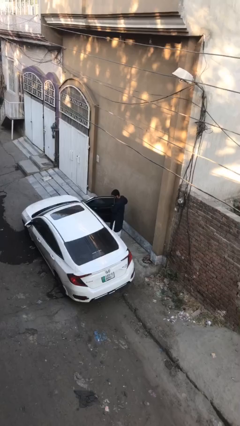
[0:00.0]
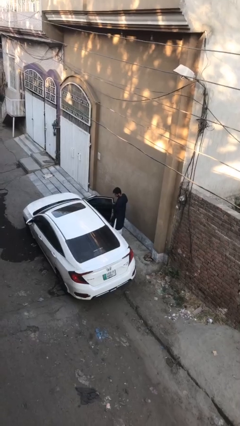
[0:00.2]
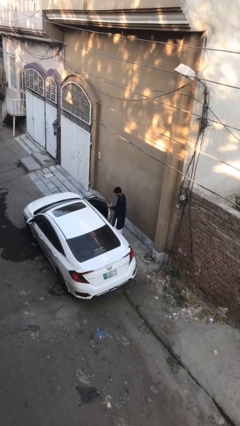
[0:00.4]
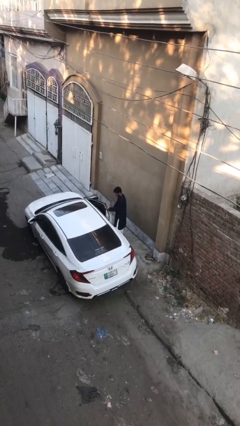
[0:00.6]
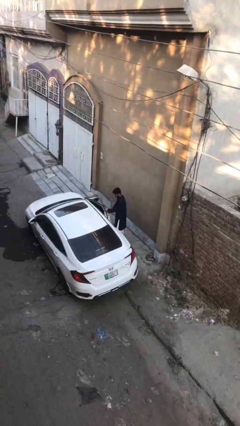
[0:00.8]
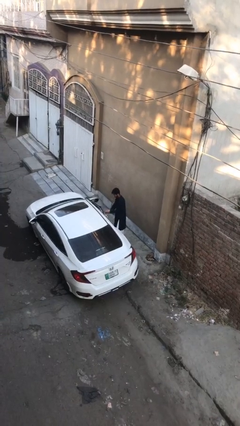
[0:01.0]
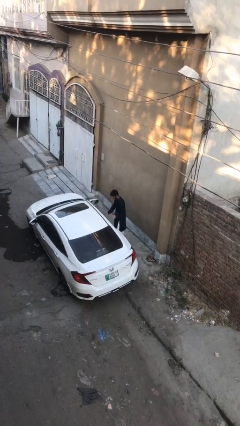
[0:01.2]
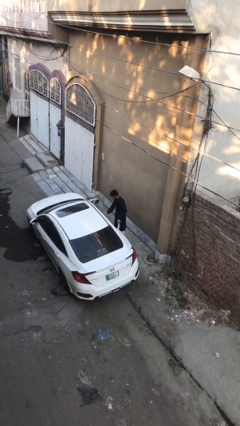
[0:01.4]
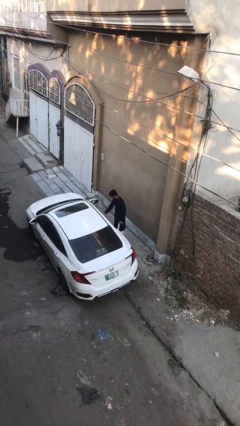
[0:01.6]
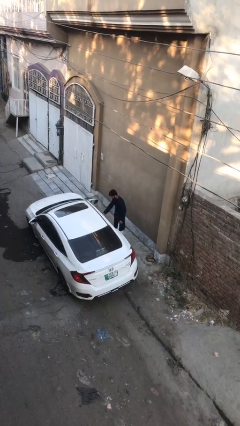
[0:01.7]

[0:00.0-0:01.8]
person closes car door

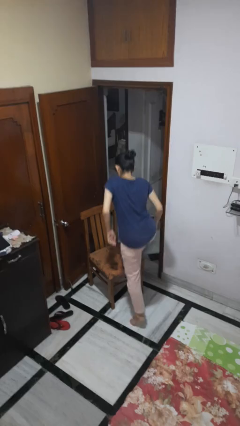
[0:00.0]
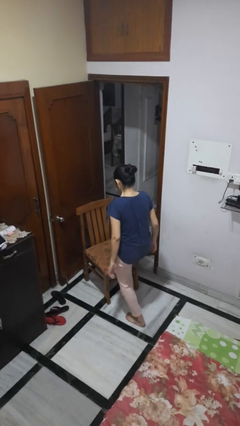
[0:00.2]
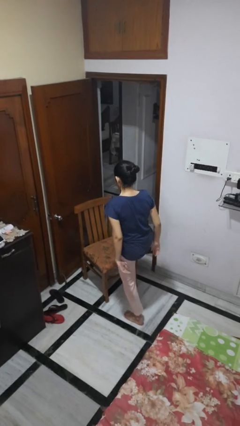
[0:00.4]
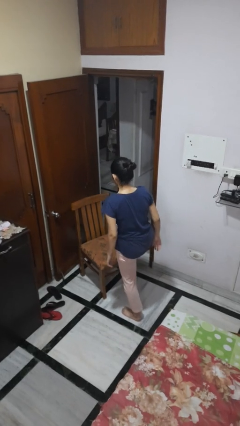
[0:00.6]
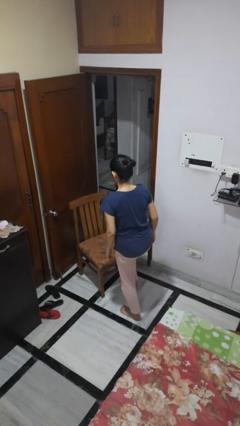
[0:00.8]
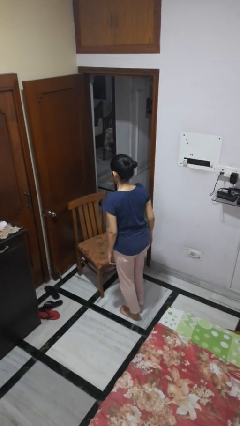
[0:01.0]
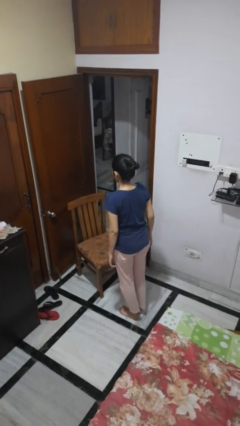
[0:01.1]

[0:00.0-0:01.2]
person climbs off chair

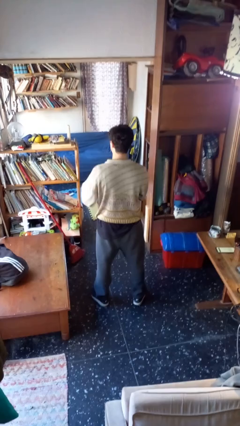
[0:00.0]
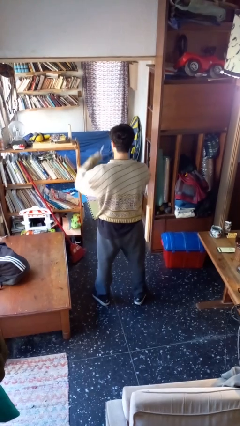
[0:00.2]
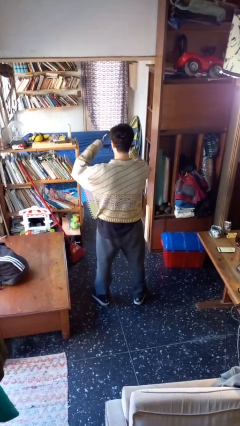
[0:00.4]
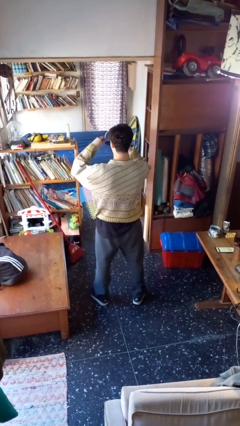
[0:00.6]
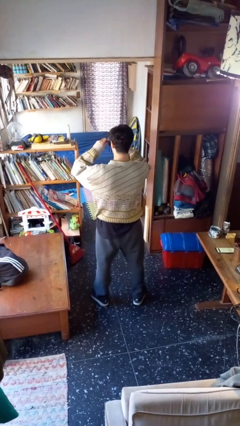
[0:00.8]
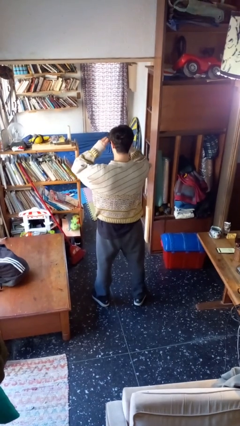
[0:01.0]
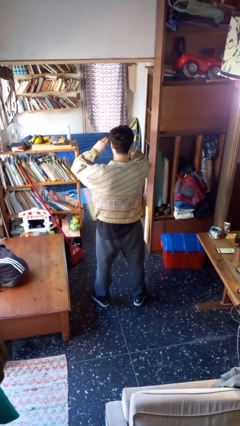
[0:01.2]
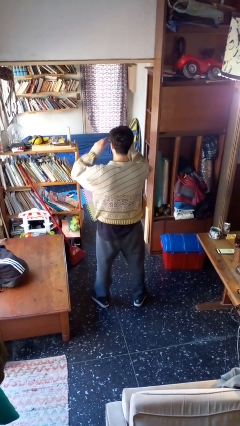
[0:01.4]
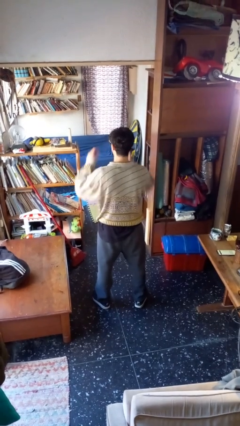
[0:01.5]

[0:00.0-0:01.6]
person puts on sunglasses

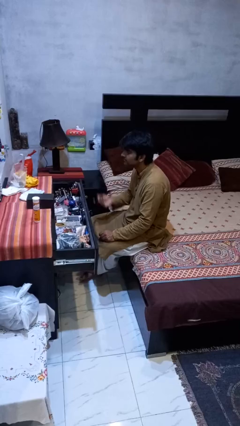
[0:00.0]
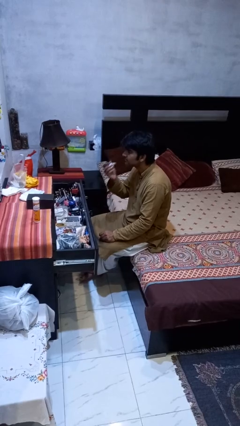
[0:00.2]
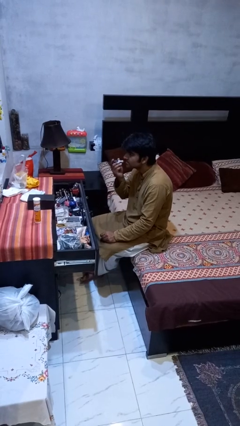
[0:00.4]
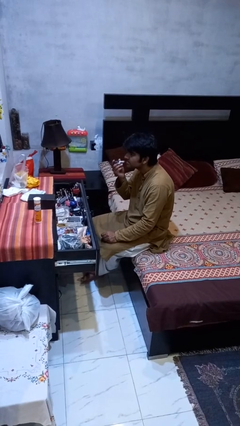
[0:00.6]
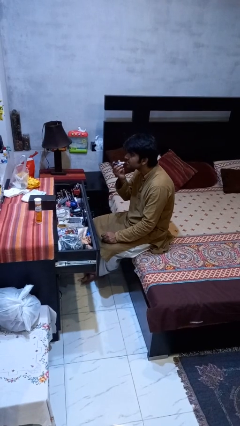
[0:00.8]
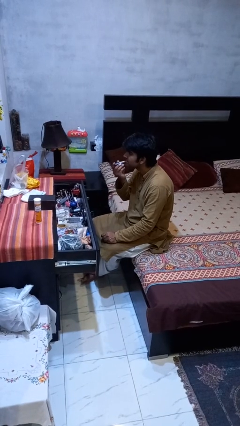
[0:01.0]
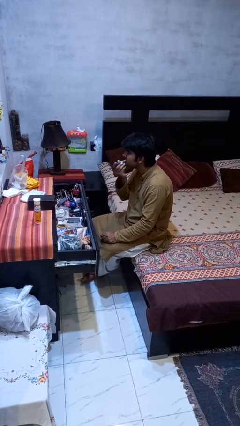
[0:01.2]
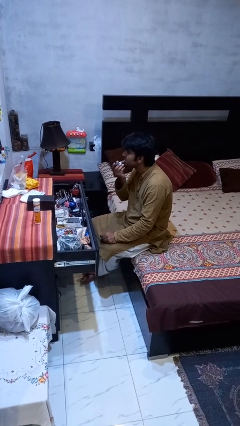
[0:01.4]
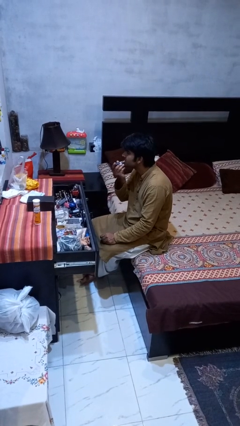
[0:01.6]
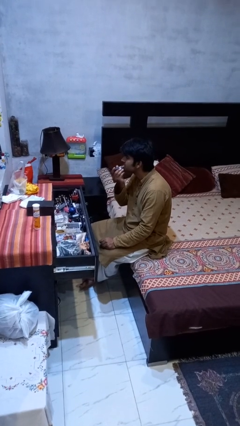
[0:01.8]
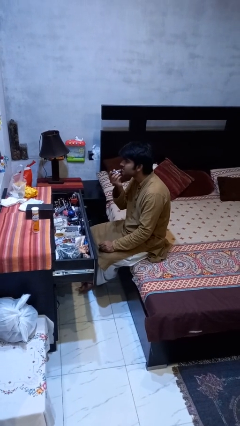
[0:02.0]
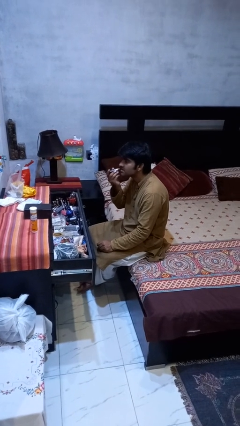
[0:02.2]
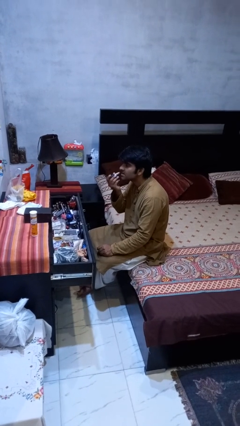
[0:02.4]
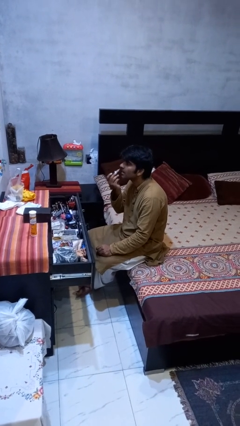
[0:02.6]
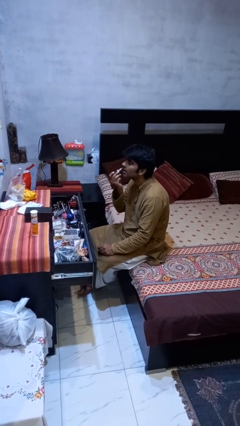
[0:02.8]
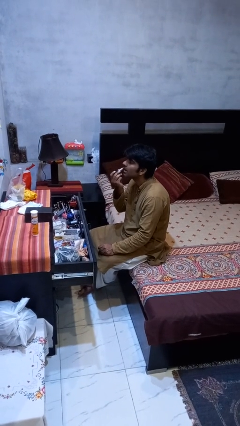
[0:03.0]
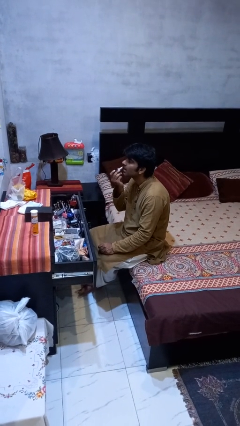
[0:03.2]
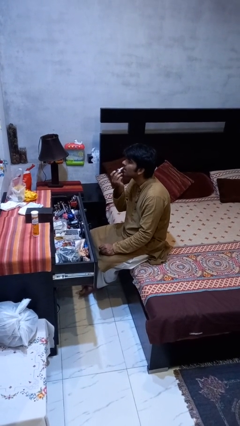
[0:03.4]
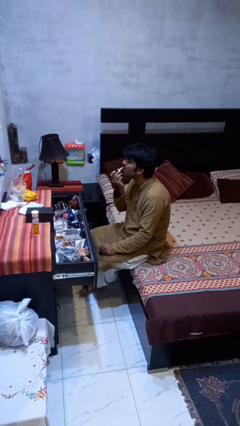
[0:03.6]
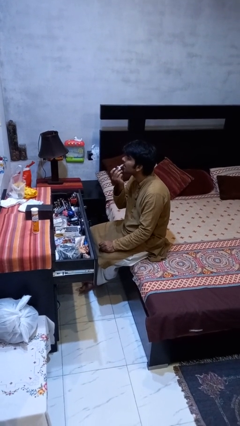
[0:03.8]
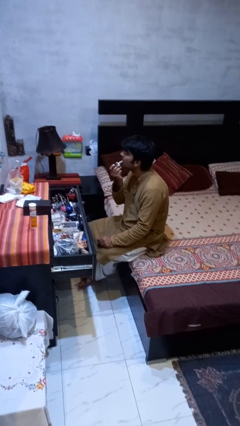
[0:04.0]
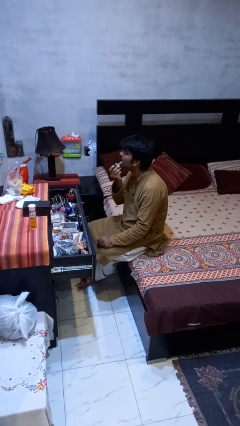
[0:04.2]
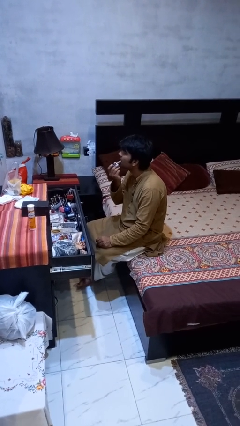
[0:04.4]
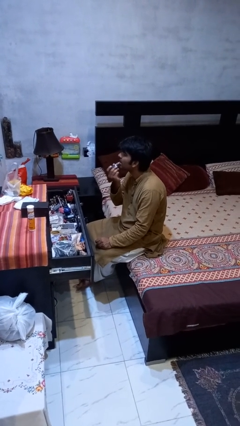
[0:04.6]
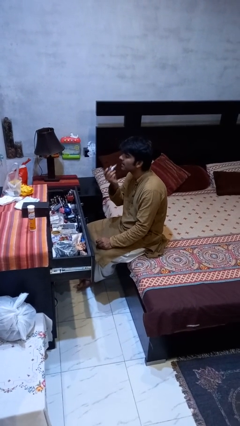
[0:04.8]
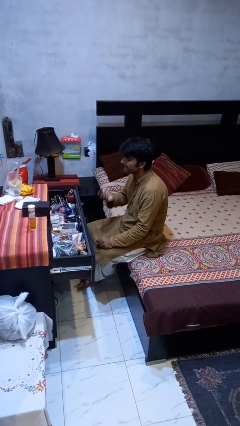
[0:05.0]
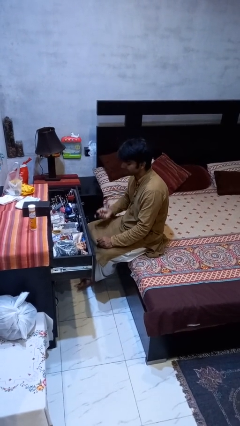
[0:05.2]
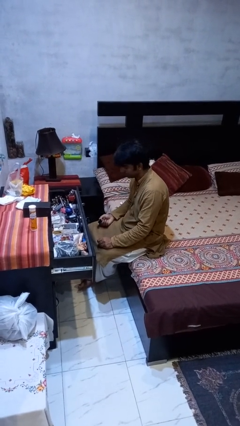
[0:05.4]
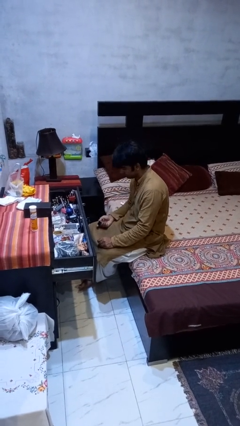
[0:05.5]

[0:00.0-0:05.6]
person applies lip makeup

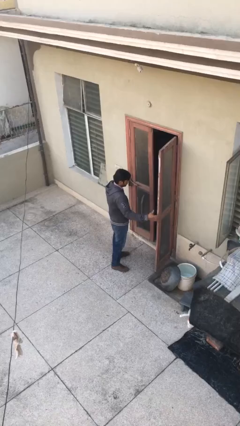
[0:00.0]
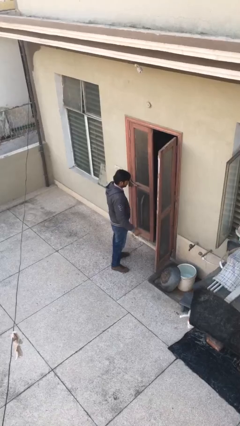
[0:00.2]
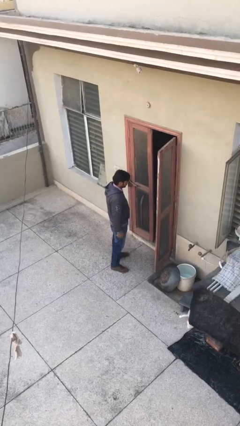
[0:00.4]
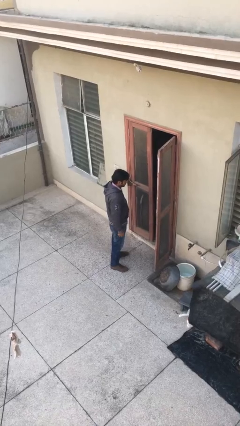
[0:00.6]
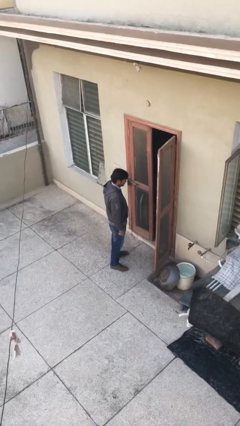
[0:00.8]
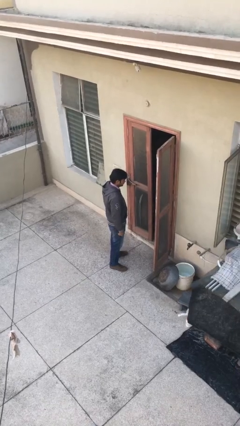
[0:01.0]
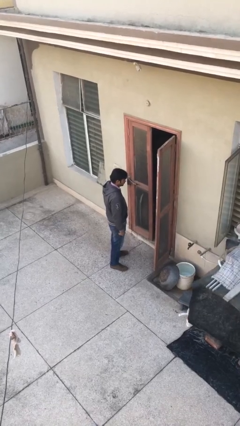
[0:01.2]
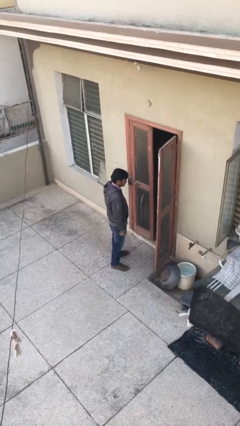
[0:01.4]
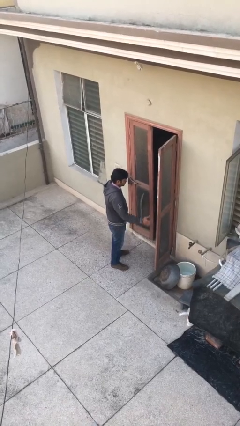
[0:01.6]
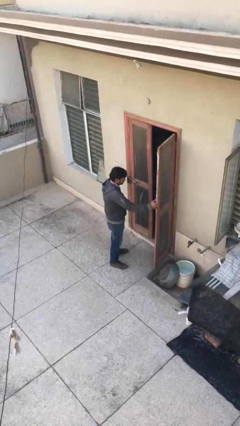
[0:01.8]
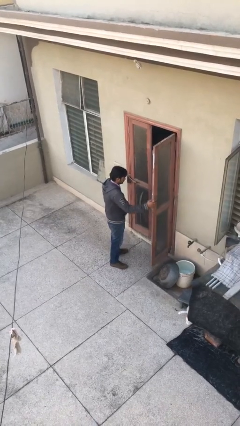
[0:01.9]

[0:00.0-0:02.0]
person opens facility door

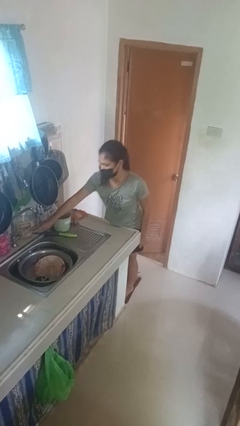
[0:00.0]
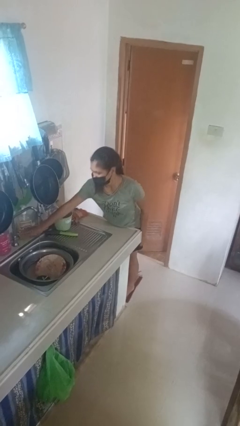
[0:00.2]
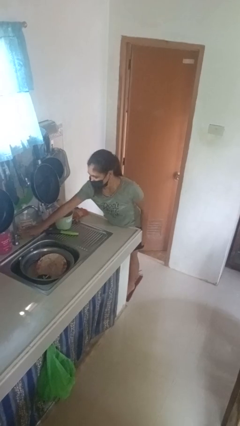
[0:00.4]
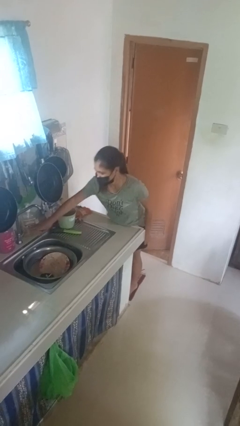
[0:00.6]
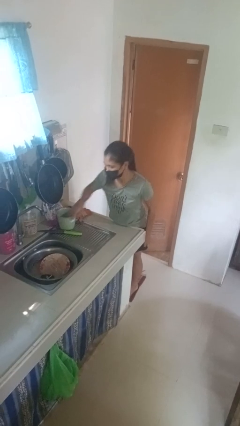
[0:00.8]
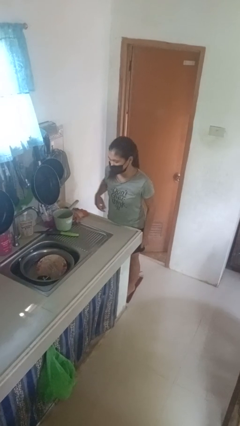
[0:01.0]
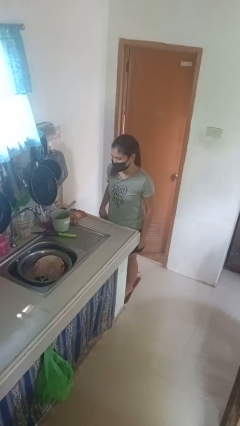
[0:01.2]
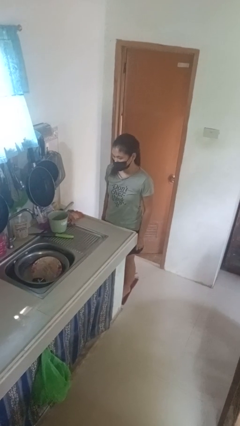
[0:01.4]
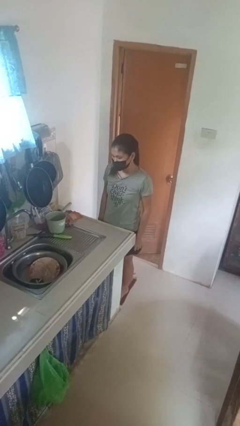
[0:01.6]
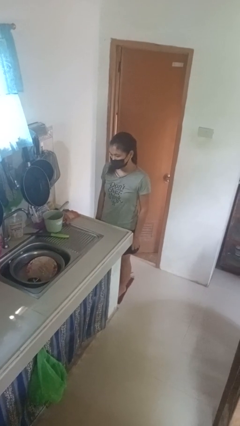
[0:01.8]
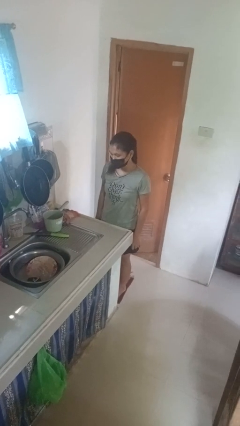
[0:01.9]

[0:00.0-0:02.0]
person turns off faucet

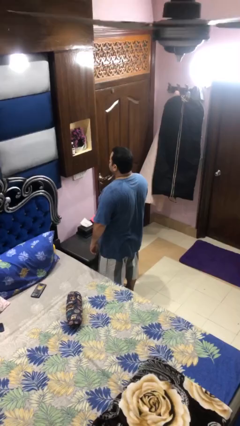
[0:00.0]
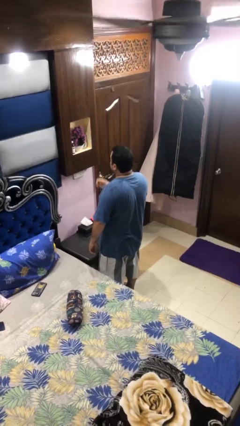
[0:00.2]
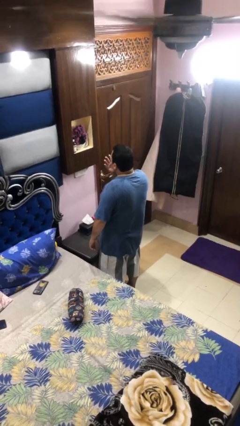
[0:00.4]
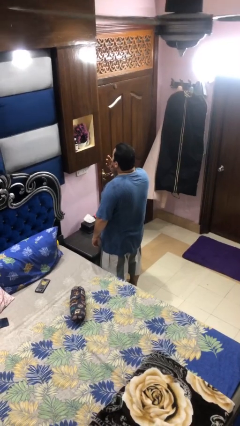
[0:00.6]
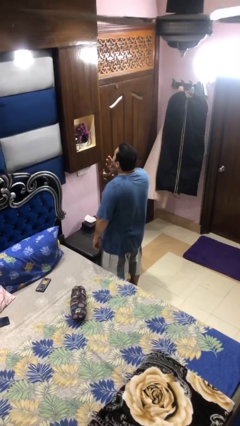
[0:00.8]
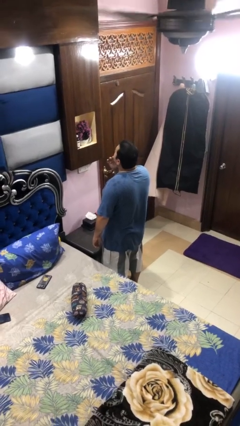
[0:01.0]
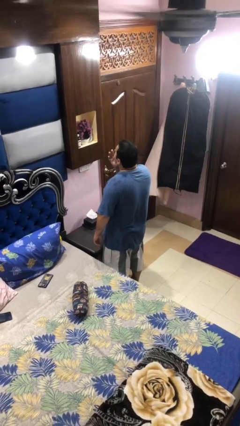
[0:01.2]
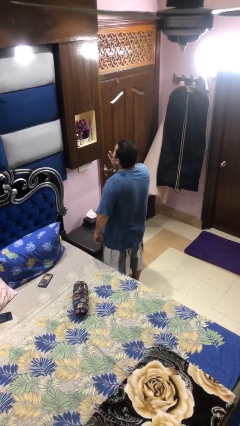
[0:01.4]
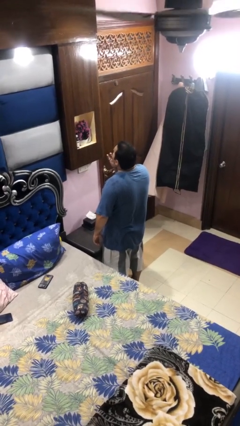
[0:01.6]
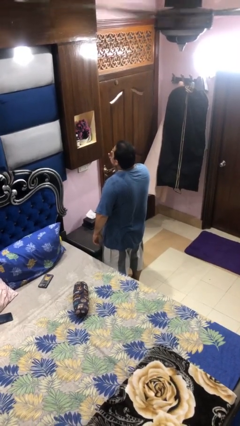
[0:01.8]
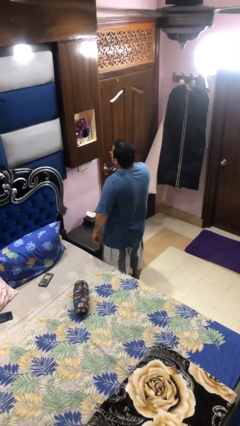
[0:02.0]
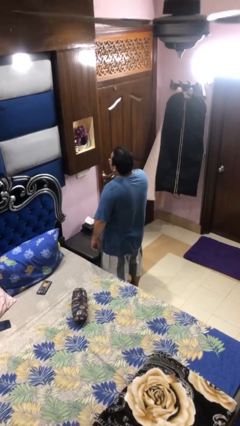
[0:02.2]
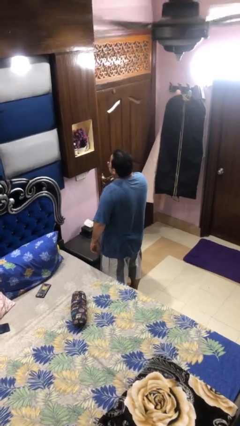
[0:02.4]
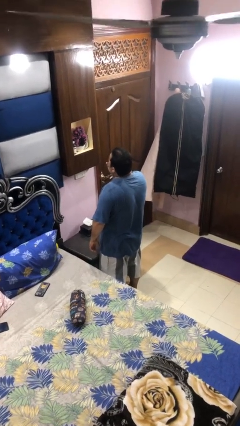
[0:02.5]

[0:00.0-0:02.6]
person licks fingers

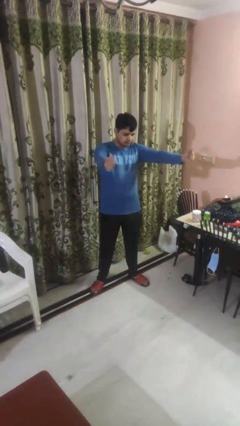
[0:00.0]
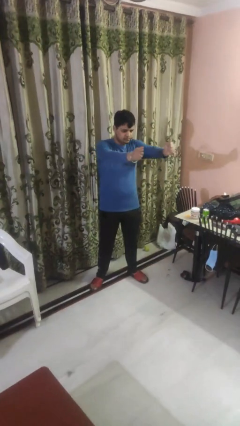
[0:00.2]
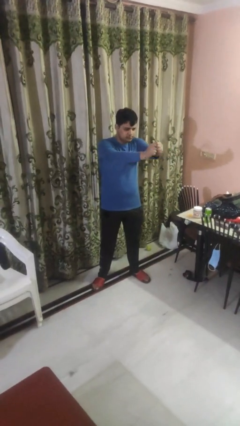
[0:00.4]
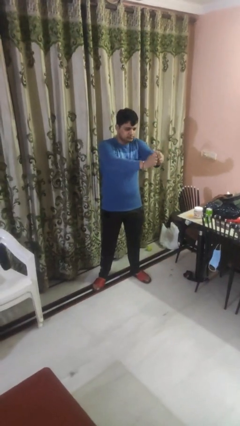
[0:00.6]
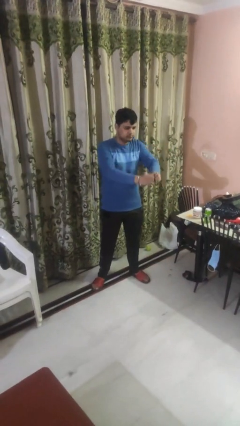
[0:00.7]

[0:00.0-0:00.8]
person gestures zoom out
